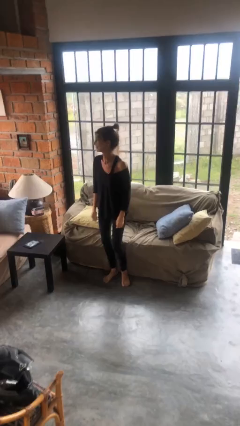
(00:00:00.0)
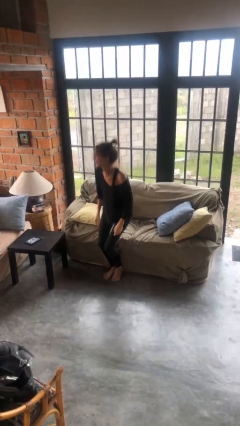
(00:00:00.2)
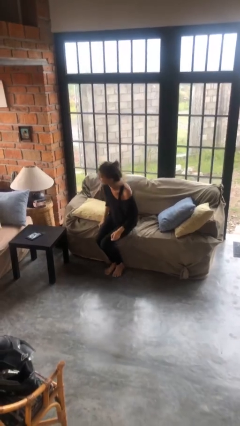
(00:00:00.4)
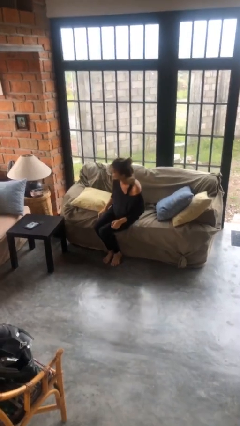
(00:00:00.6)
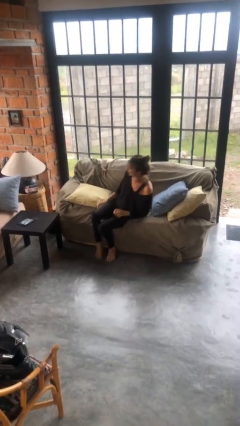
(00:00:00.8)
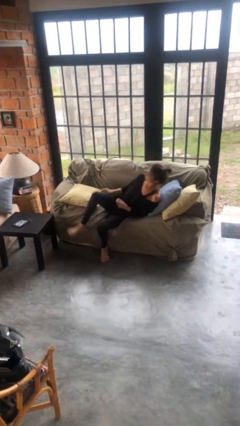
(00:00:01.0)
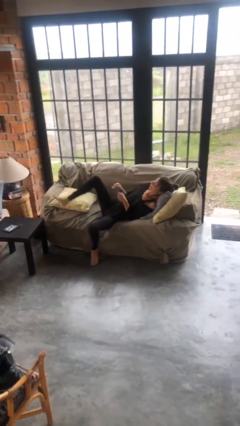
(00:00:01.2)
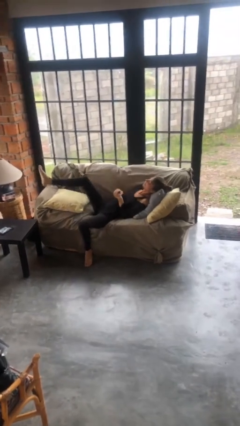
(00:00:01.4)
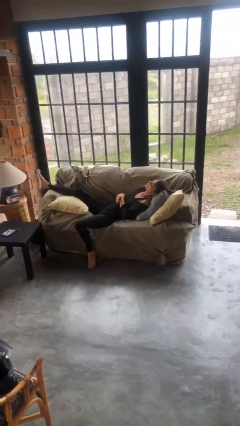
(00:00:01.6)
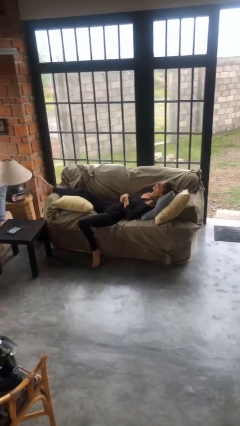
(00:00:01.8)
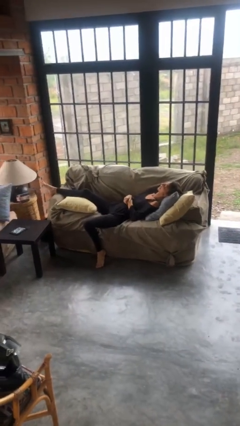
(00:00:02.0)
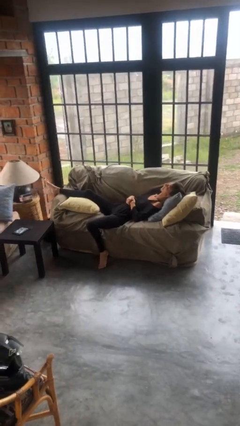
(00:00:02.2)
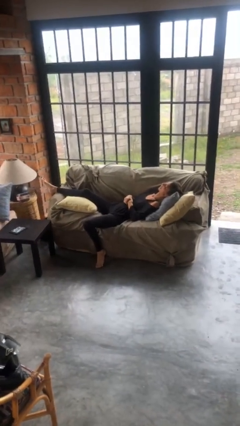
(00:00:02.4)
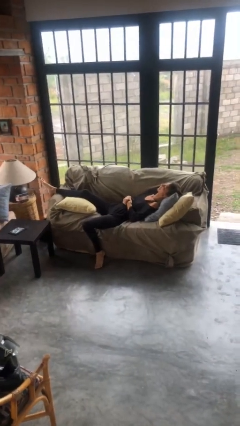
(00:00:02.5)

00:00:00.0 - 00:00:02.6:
person lies down on couch

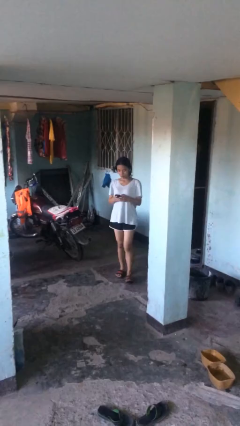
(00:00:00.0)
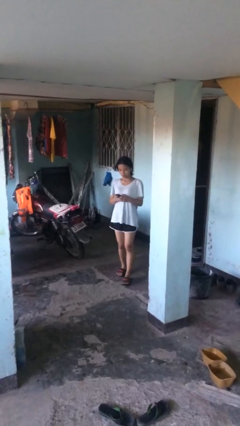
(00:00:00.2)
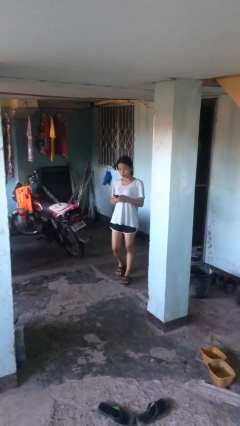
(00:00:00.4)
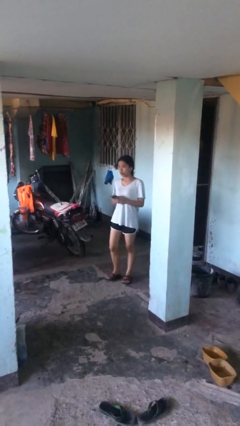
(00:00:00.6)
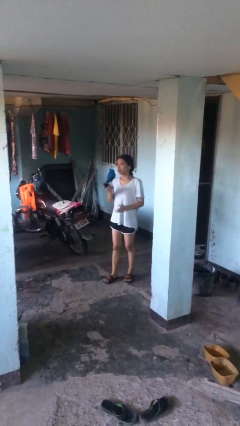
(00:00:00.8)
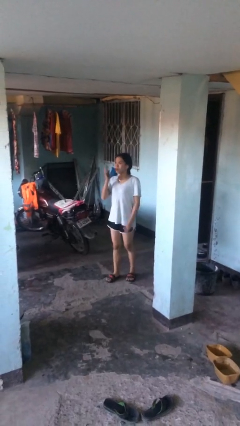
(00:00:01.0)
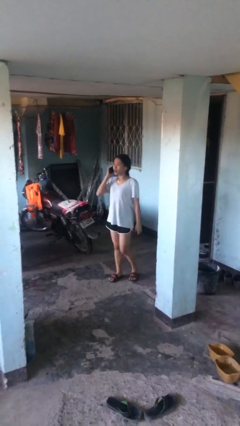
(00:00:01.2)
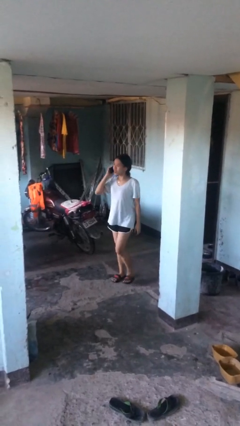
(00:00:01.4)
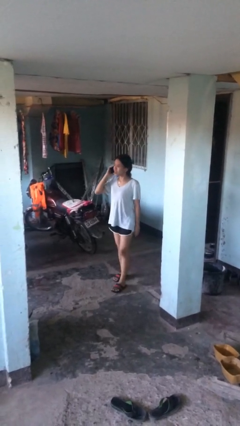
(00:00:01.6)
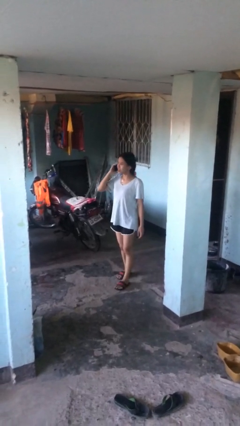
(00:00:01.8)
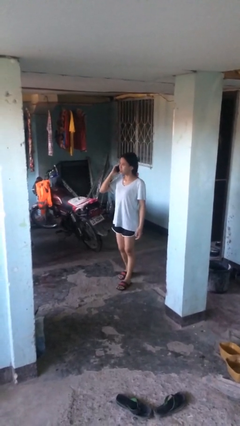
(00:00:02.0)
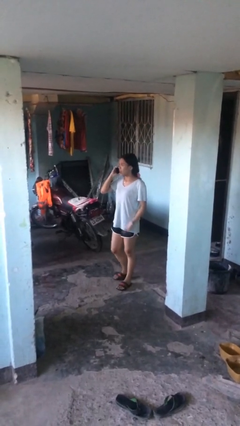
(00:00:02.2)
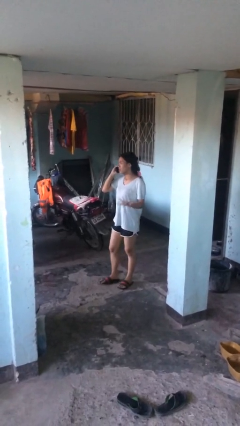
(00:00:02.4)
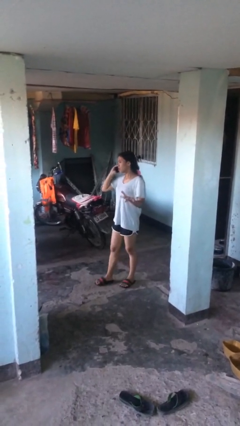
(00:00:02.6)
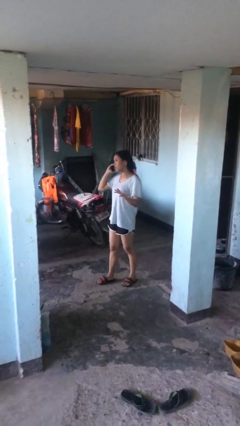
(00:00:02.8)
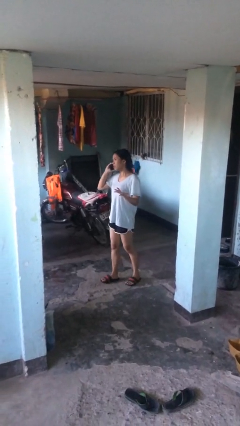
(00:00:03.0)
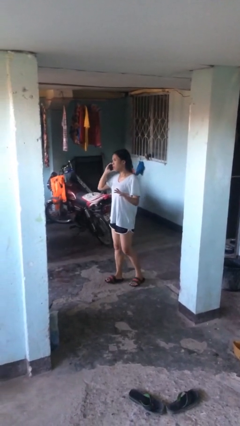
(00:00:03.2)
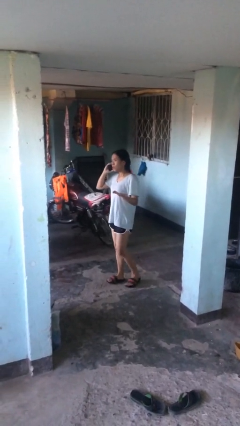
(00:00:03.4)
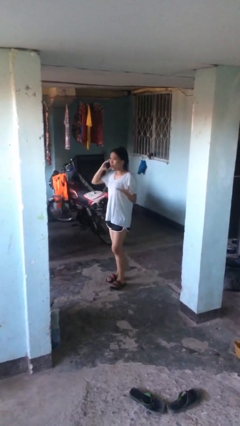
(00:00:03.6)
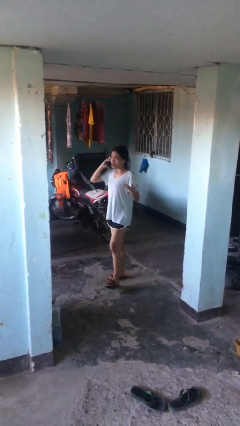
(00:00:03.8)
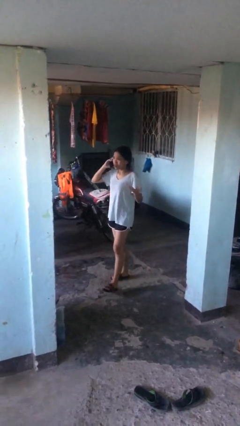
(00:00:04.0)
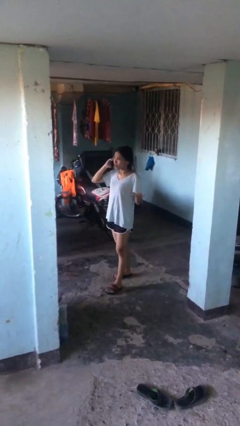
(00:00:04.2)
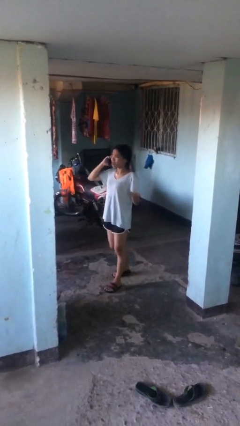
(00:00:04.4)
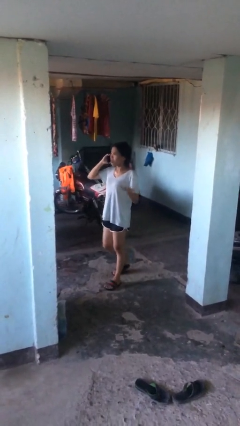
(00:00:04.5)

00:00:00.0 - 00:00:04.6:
person talks on phone

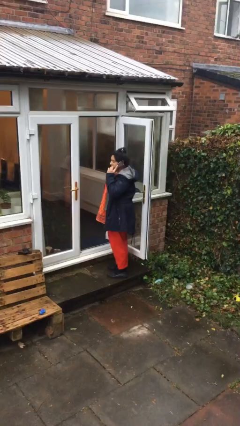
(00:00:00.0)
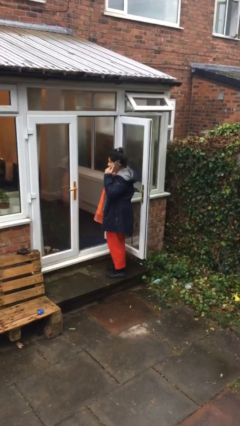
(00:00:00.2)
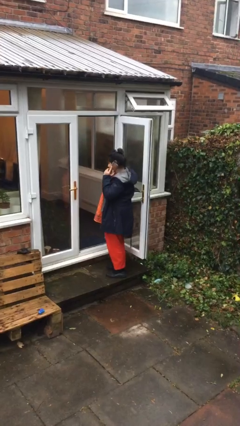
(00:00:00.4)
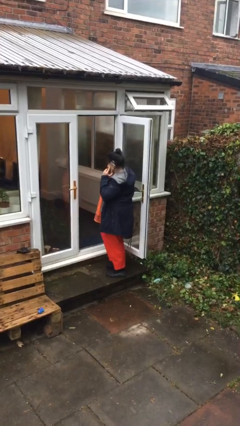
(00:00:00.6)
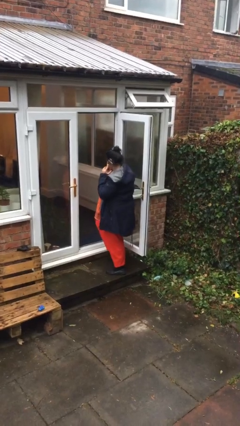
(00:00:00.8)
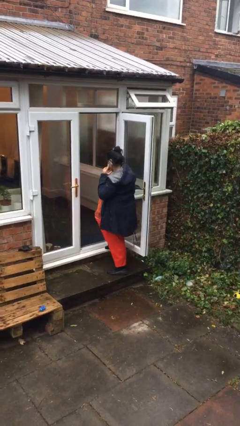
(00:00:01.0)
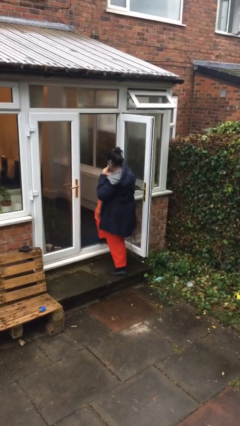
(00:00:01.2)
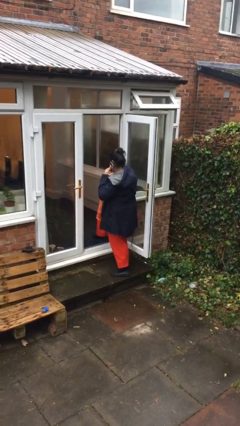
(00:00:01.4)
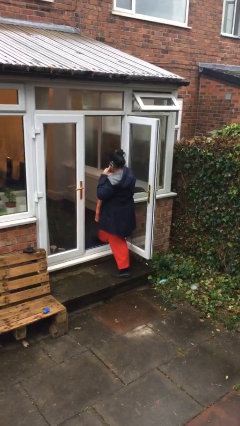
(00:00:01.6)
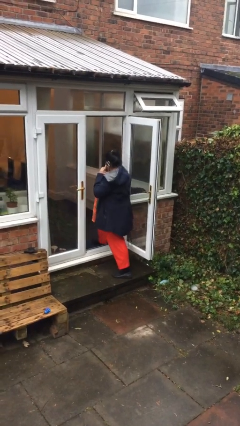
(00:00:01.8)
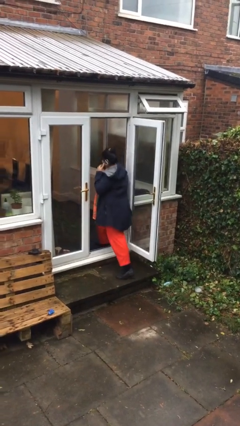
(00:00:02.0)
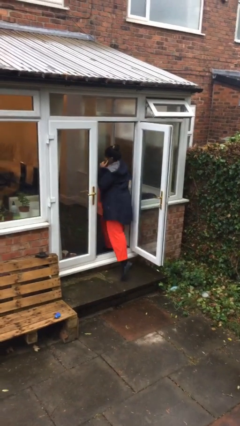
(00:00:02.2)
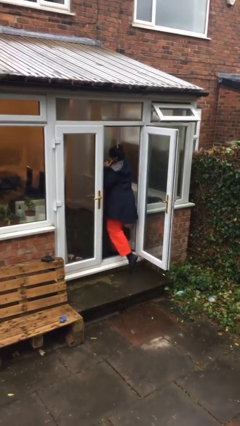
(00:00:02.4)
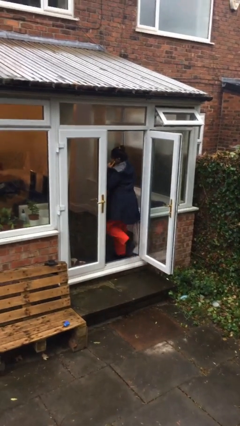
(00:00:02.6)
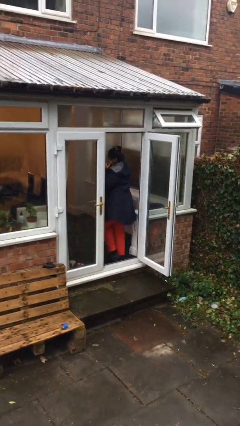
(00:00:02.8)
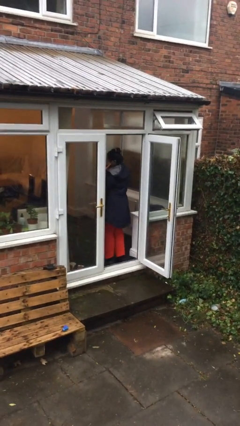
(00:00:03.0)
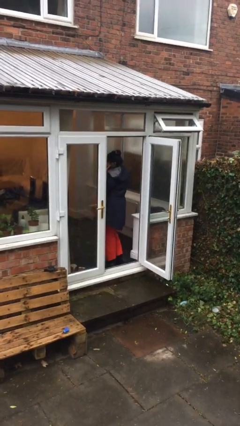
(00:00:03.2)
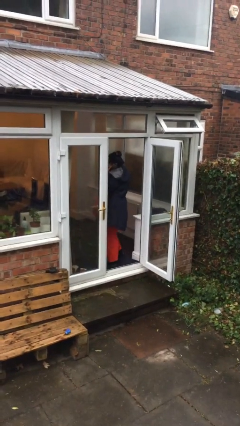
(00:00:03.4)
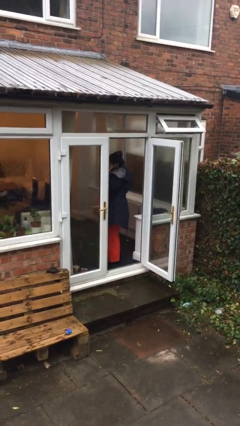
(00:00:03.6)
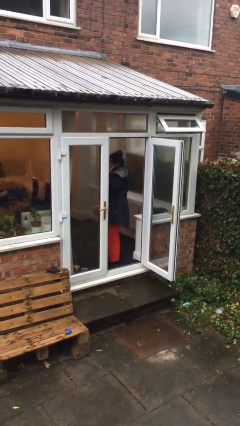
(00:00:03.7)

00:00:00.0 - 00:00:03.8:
person exits scene through structure

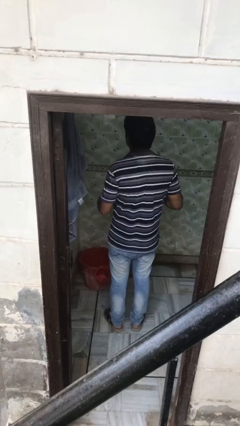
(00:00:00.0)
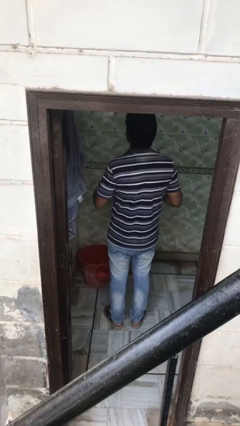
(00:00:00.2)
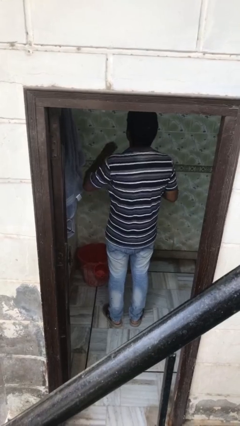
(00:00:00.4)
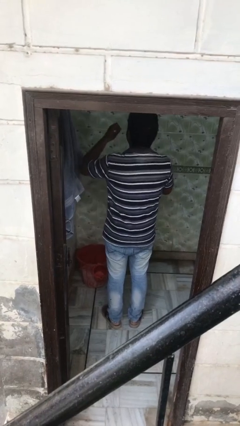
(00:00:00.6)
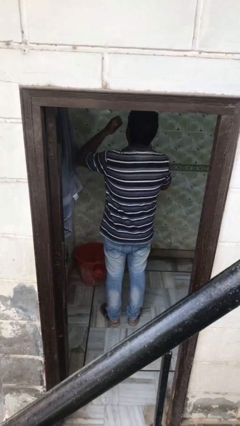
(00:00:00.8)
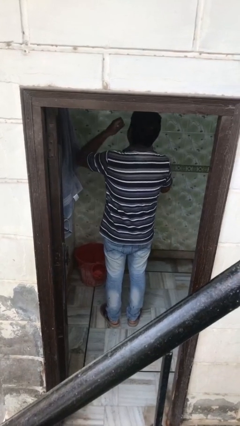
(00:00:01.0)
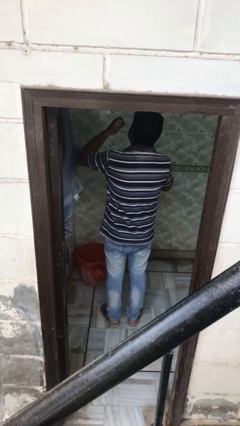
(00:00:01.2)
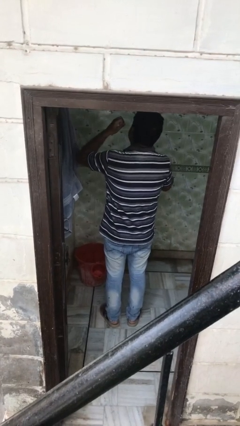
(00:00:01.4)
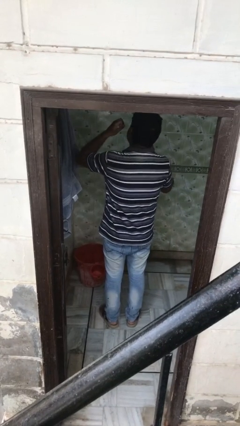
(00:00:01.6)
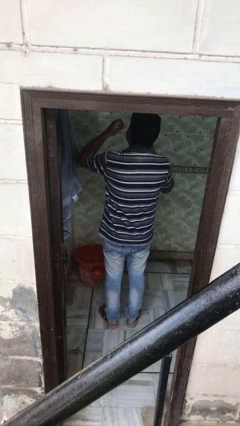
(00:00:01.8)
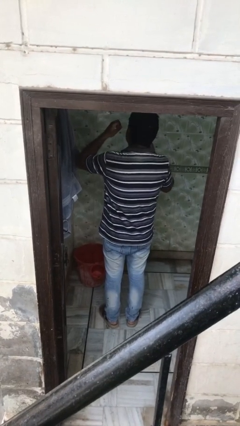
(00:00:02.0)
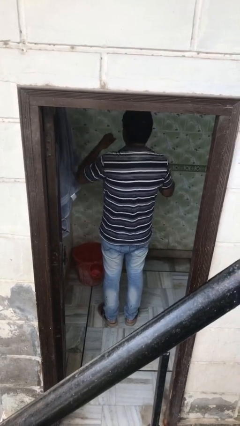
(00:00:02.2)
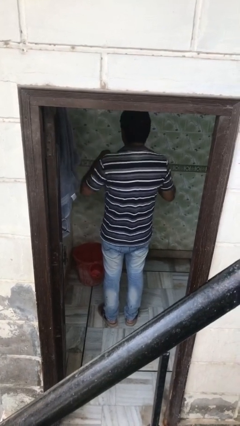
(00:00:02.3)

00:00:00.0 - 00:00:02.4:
person flosses

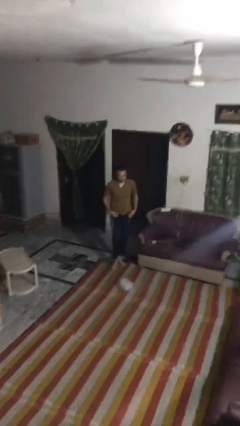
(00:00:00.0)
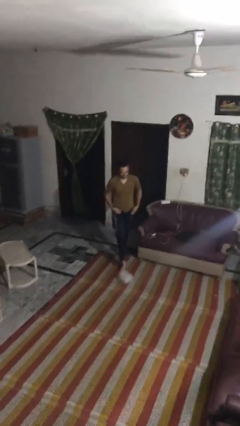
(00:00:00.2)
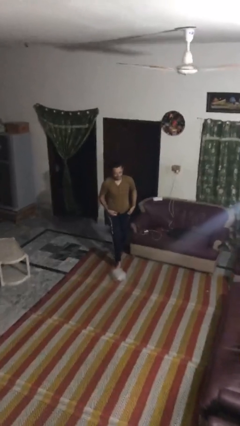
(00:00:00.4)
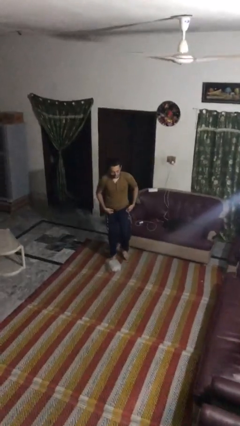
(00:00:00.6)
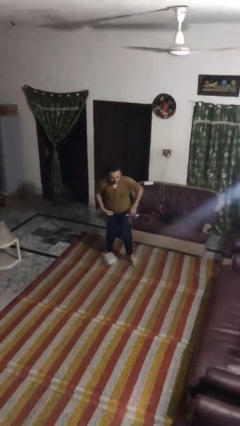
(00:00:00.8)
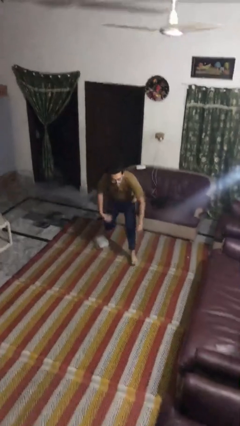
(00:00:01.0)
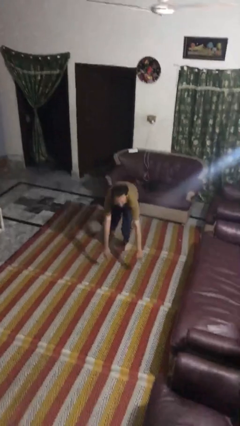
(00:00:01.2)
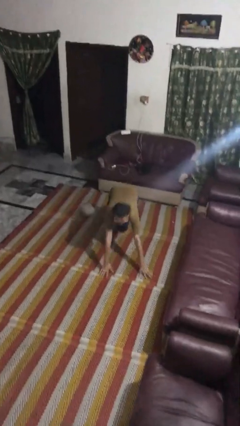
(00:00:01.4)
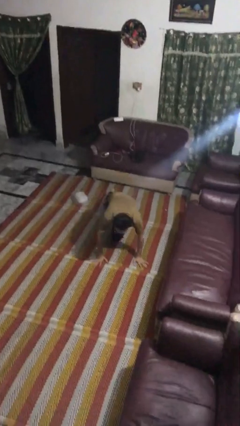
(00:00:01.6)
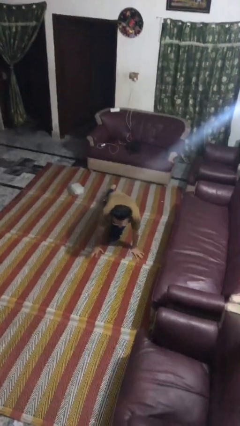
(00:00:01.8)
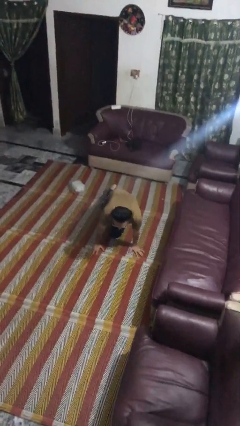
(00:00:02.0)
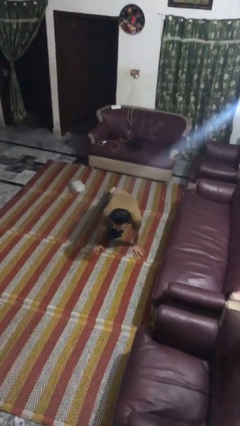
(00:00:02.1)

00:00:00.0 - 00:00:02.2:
person trips on object on floor

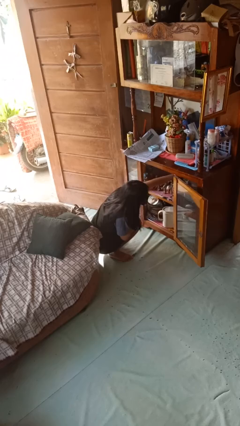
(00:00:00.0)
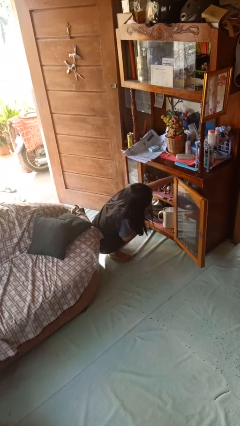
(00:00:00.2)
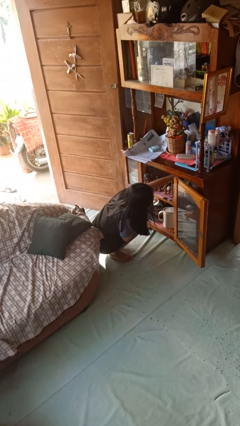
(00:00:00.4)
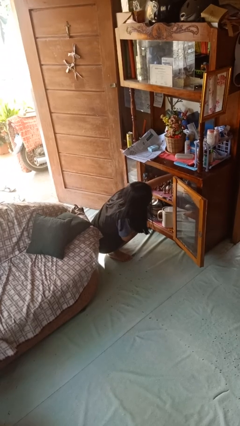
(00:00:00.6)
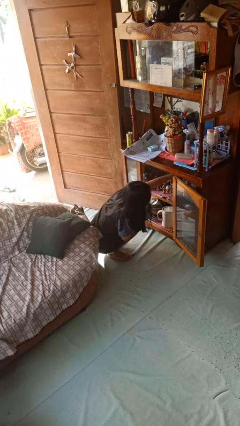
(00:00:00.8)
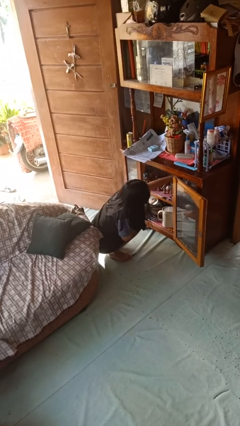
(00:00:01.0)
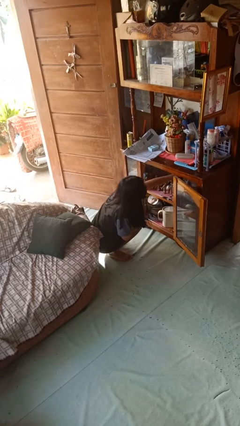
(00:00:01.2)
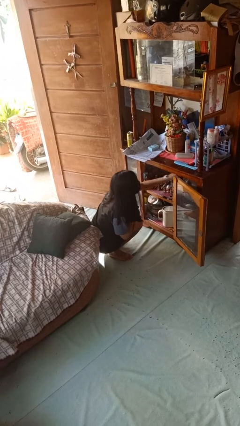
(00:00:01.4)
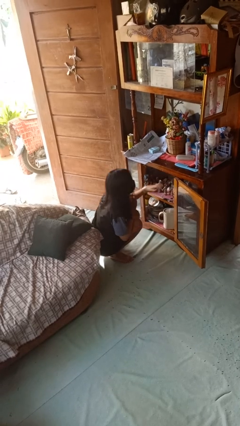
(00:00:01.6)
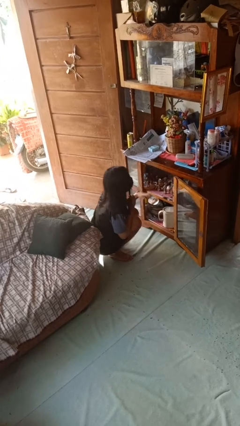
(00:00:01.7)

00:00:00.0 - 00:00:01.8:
person searches in cabinet
